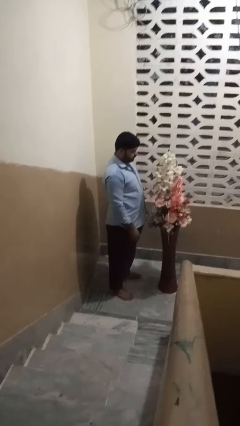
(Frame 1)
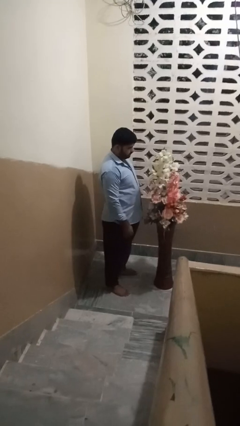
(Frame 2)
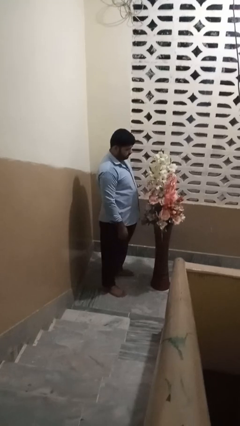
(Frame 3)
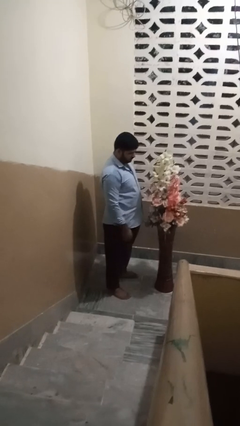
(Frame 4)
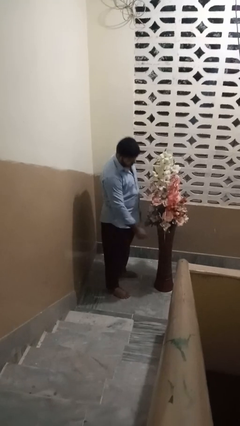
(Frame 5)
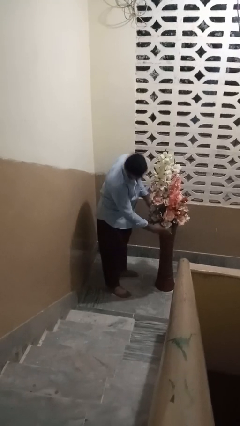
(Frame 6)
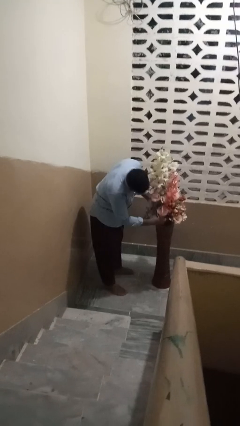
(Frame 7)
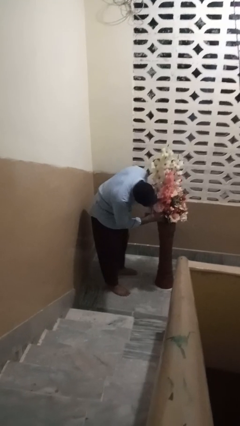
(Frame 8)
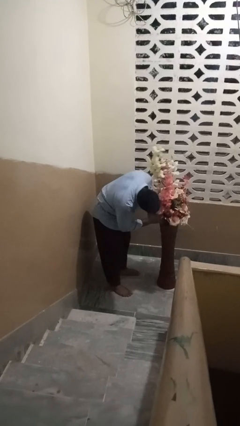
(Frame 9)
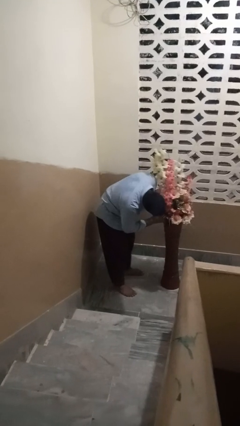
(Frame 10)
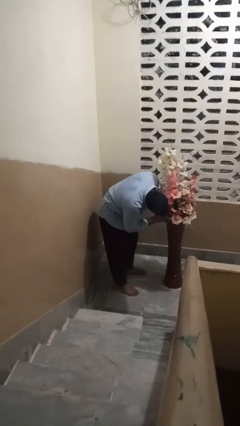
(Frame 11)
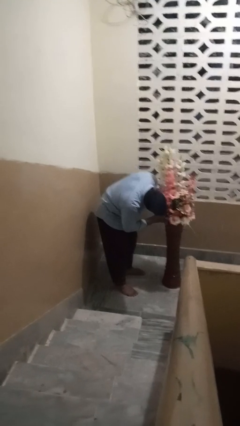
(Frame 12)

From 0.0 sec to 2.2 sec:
person arranges flowers in vase

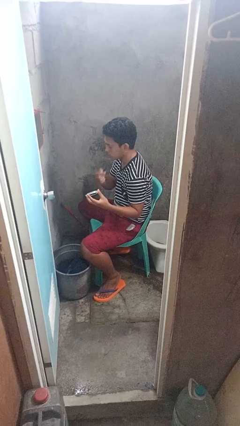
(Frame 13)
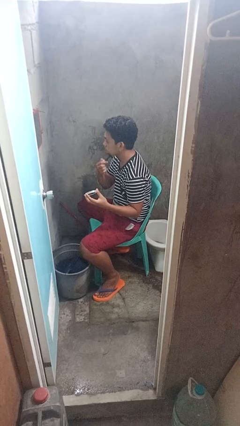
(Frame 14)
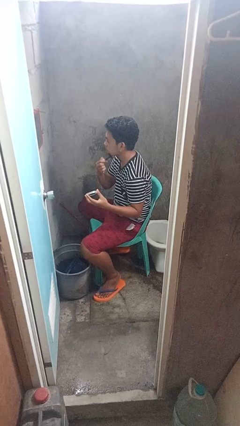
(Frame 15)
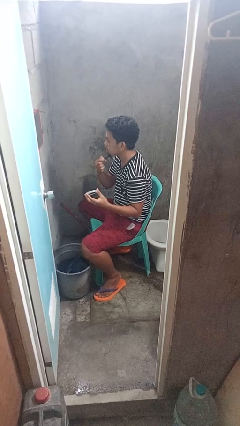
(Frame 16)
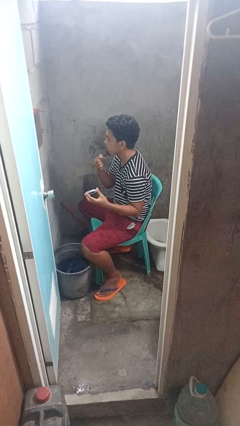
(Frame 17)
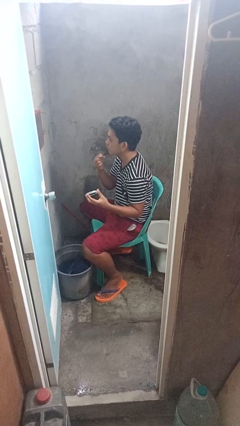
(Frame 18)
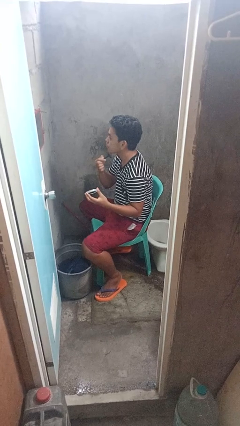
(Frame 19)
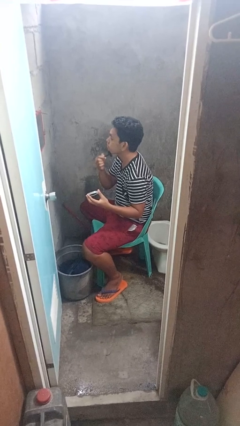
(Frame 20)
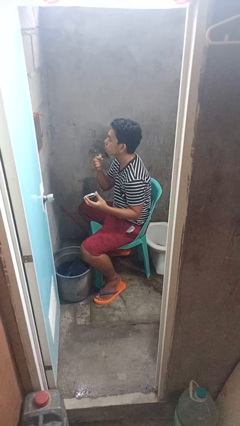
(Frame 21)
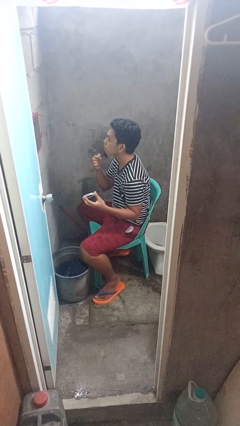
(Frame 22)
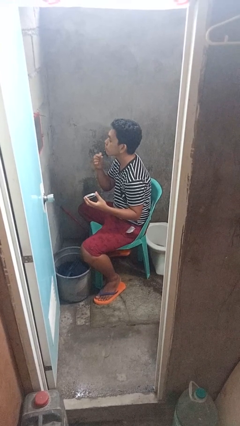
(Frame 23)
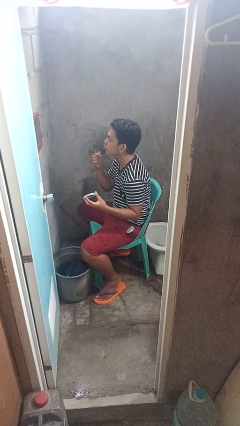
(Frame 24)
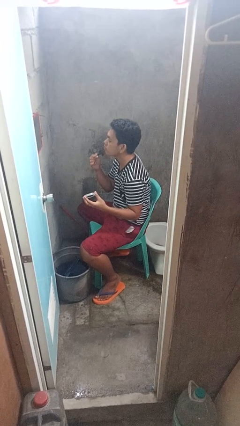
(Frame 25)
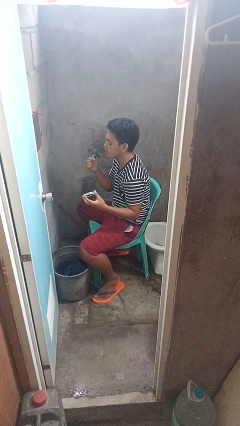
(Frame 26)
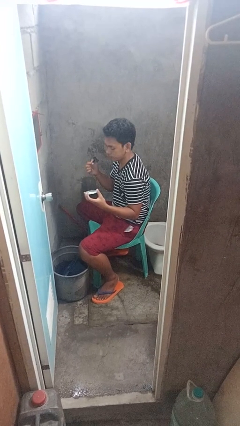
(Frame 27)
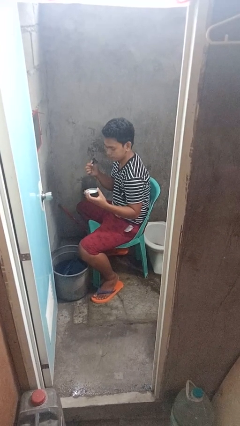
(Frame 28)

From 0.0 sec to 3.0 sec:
person shaves face

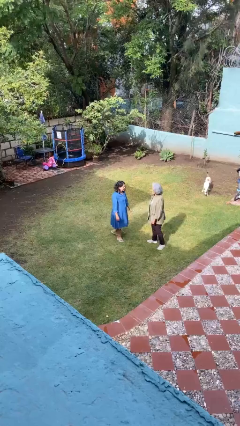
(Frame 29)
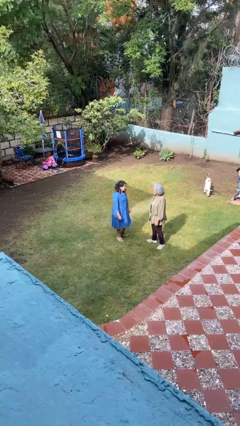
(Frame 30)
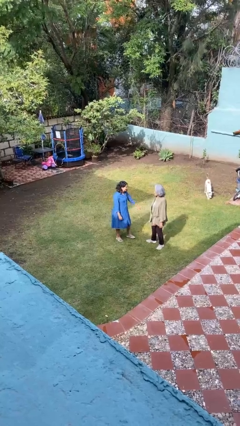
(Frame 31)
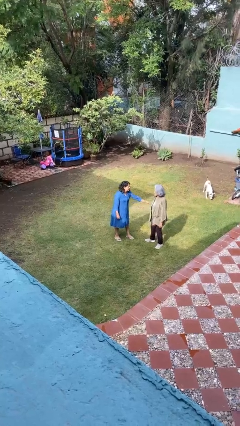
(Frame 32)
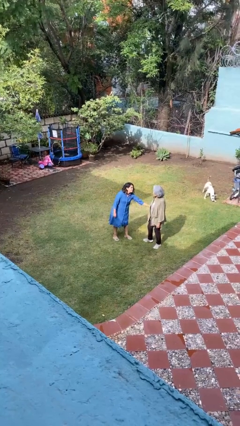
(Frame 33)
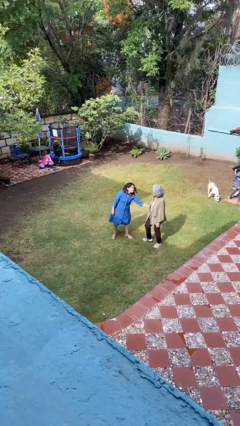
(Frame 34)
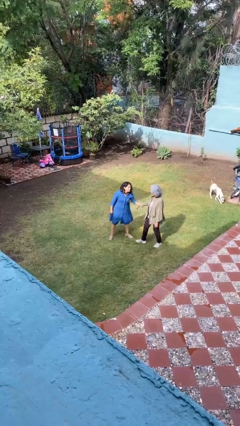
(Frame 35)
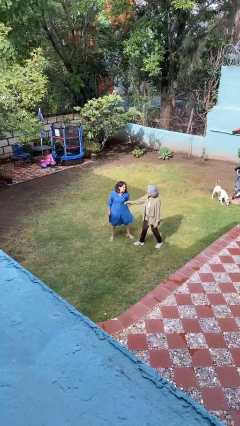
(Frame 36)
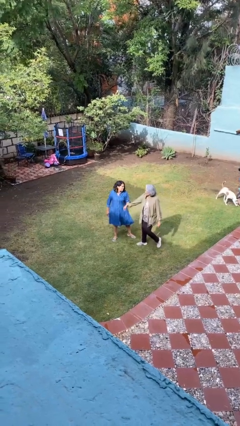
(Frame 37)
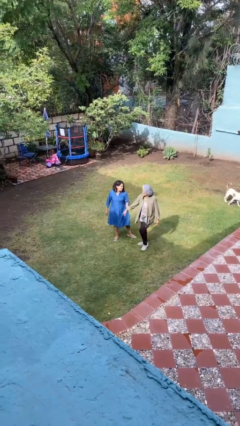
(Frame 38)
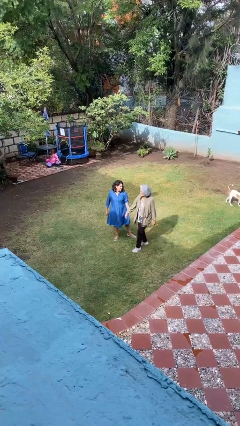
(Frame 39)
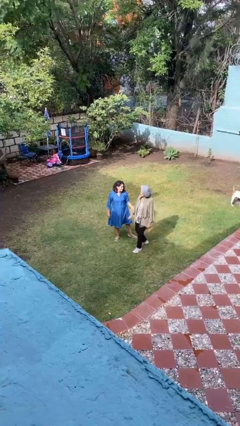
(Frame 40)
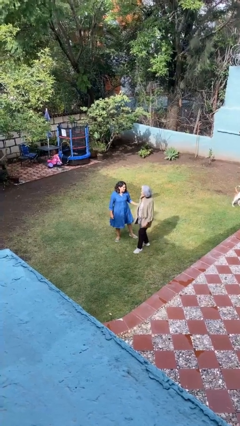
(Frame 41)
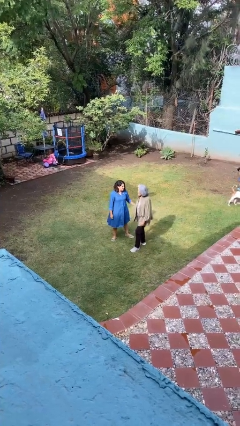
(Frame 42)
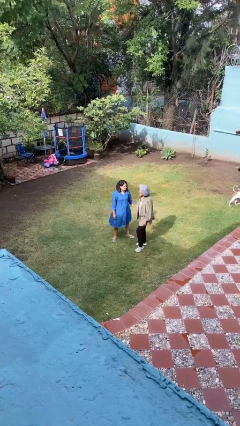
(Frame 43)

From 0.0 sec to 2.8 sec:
person grabs person by forearm

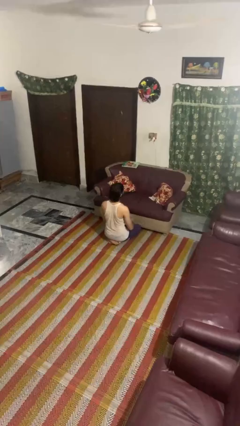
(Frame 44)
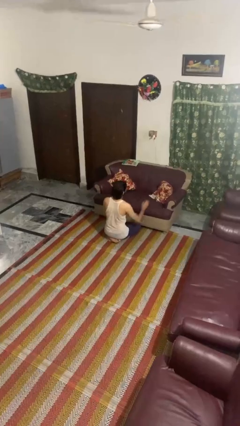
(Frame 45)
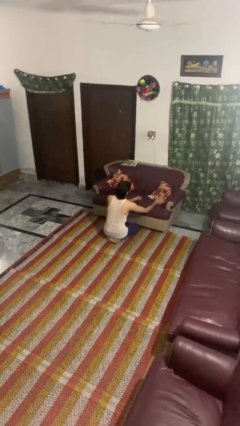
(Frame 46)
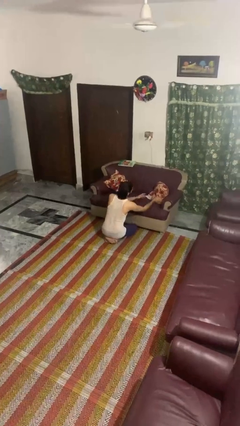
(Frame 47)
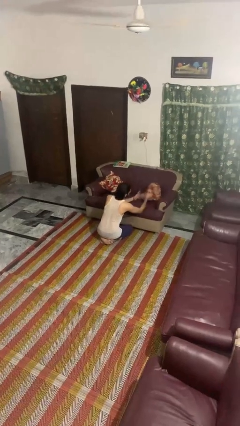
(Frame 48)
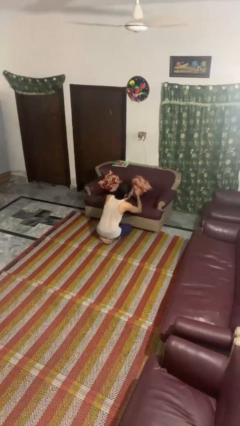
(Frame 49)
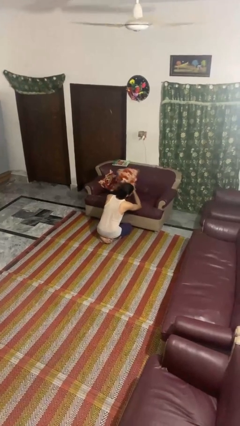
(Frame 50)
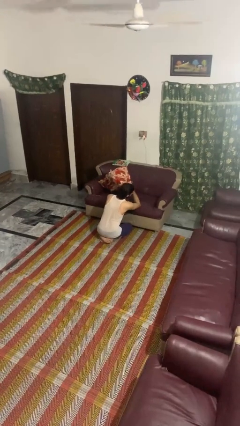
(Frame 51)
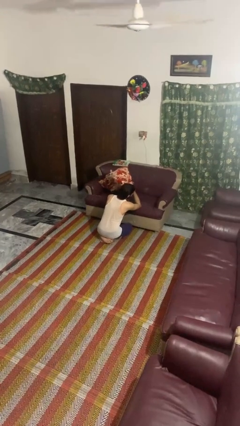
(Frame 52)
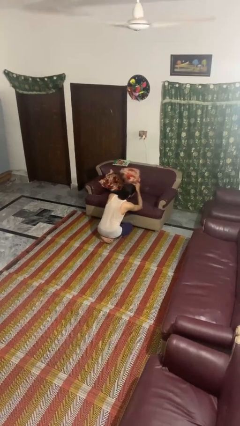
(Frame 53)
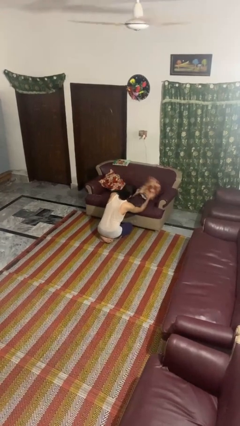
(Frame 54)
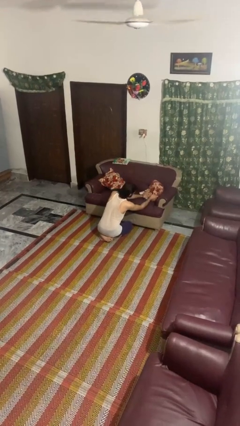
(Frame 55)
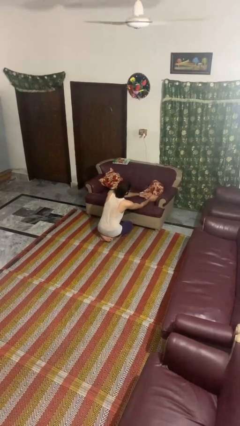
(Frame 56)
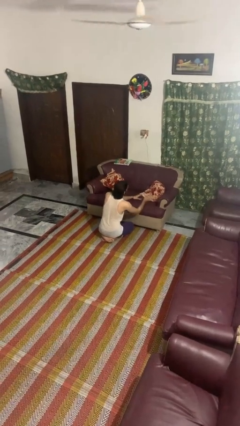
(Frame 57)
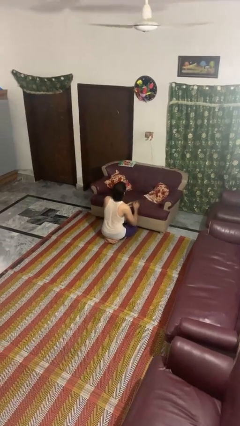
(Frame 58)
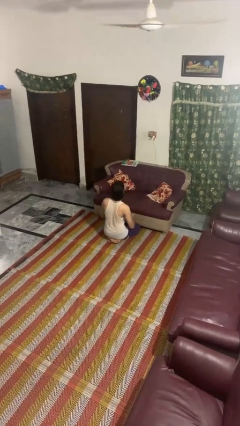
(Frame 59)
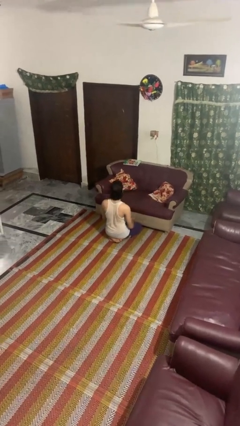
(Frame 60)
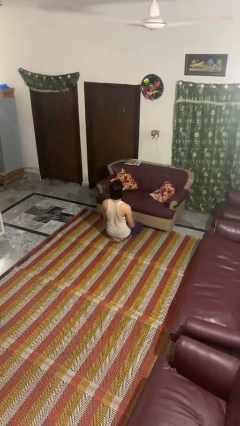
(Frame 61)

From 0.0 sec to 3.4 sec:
person searches in couch

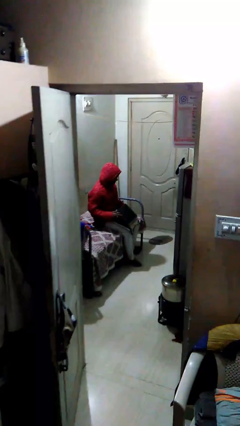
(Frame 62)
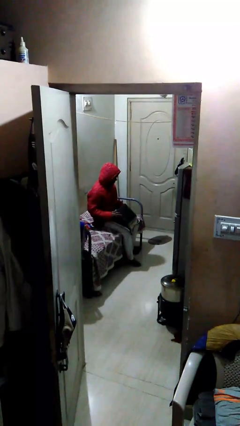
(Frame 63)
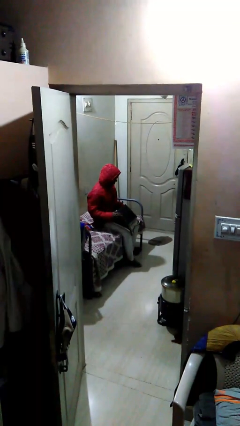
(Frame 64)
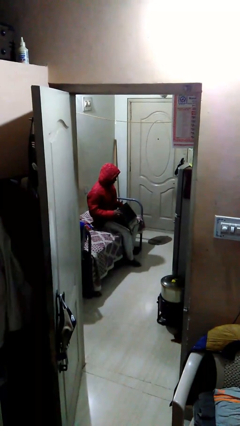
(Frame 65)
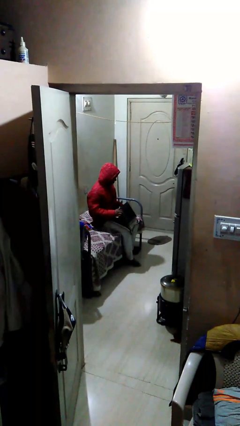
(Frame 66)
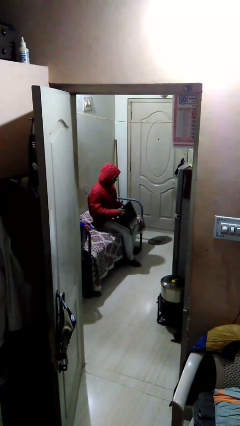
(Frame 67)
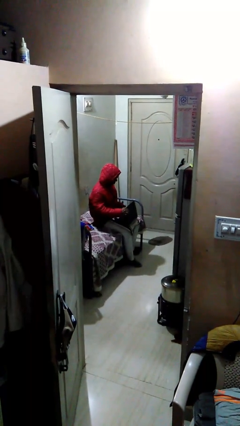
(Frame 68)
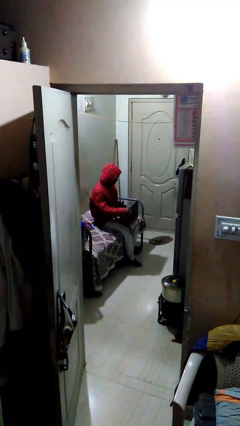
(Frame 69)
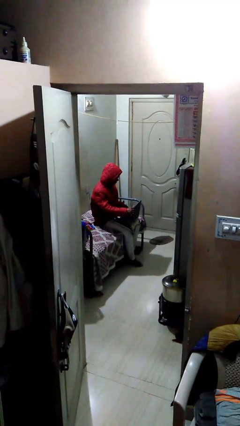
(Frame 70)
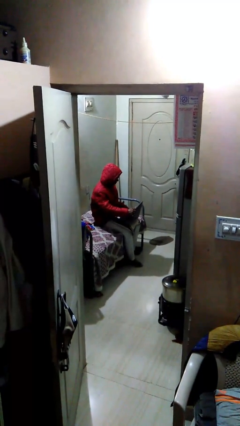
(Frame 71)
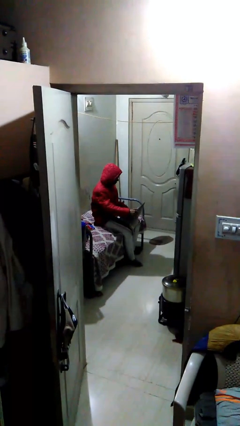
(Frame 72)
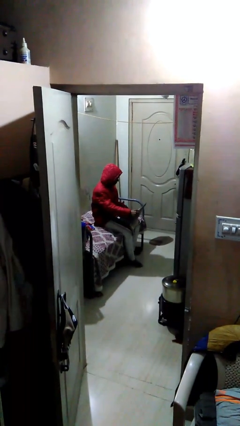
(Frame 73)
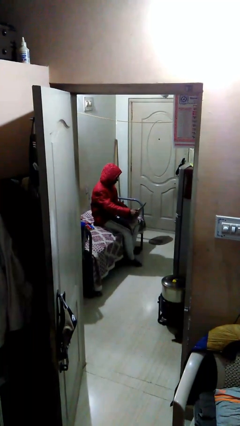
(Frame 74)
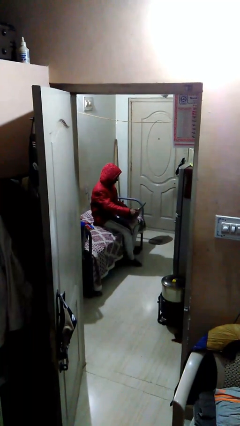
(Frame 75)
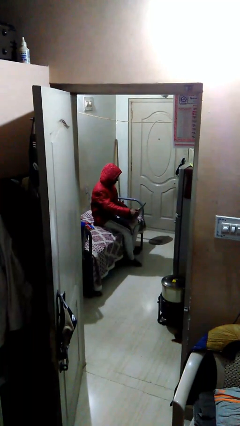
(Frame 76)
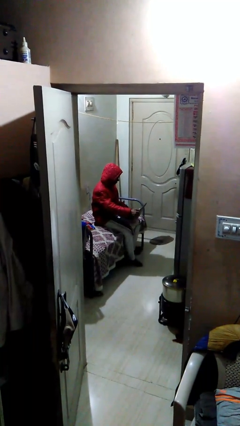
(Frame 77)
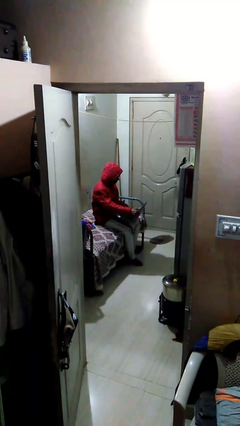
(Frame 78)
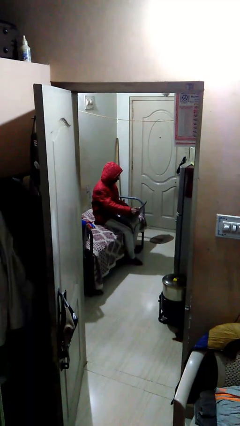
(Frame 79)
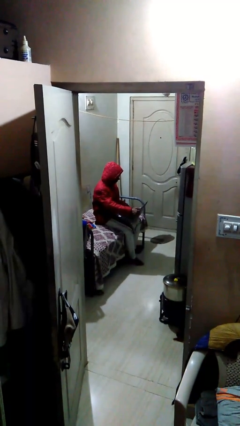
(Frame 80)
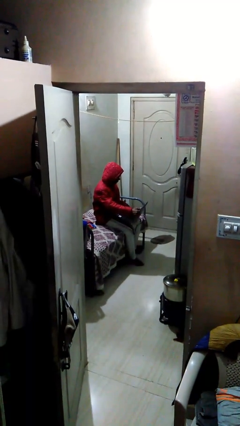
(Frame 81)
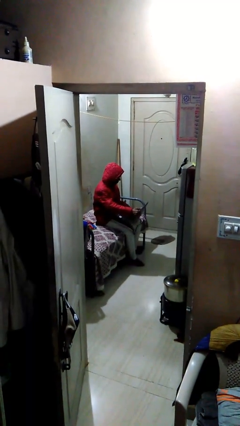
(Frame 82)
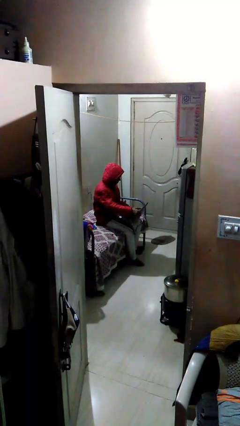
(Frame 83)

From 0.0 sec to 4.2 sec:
person interacts with laptop

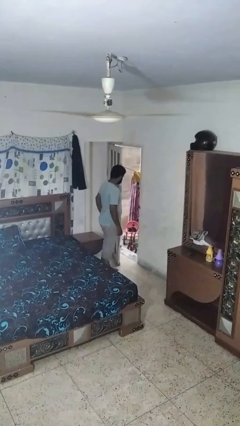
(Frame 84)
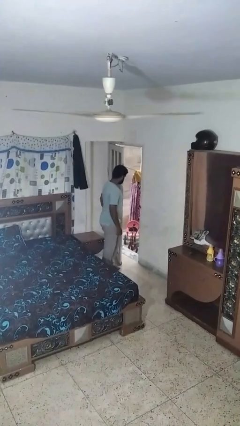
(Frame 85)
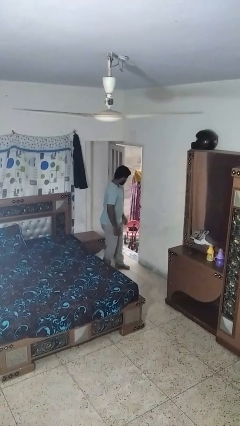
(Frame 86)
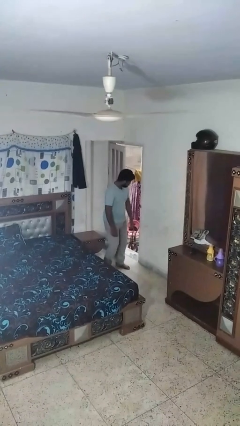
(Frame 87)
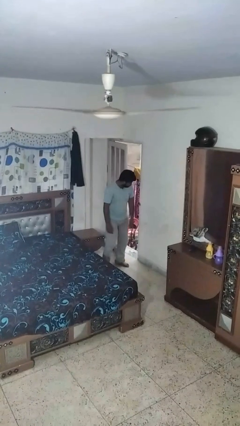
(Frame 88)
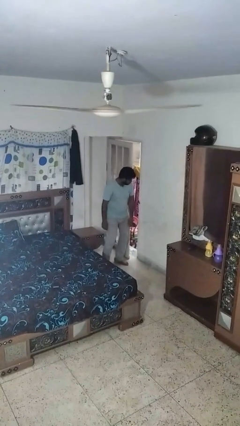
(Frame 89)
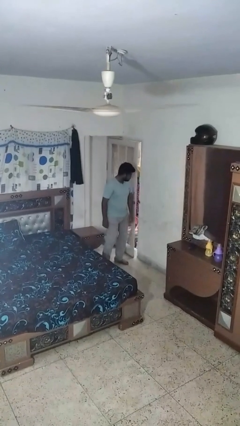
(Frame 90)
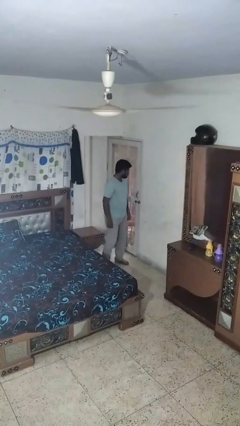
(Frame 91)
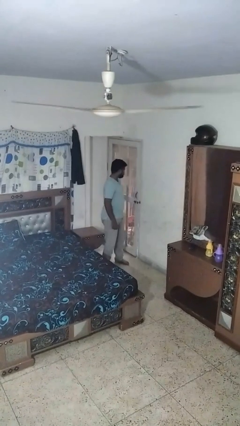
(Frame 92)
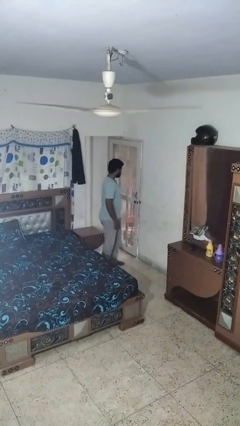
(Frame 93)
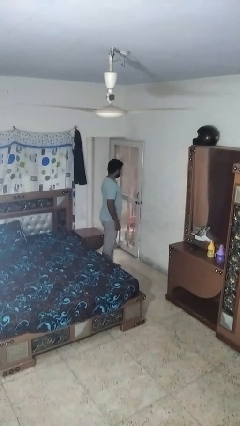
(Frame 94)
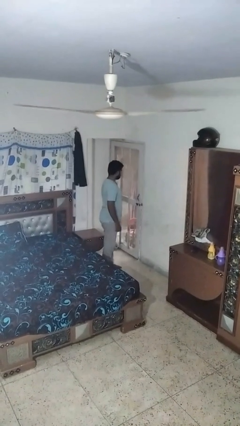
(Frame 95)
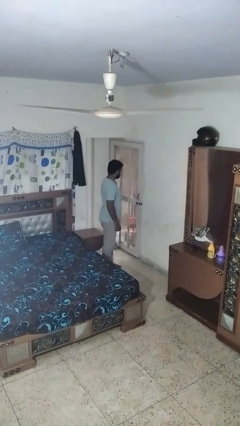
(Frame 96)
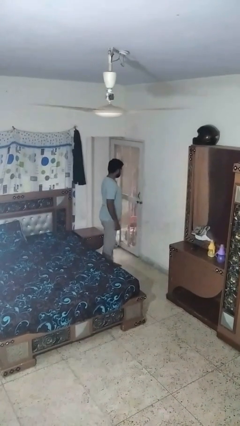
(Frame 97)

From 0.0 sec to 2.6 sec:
person closes door with hip
